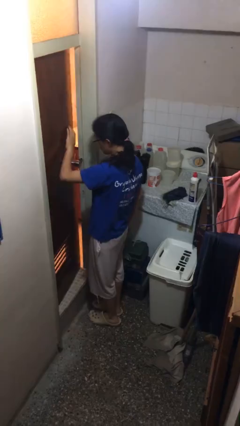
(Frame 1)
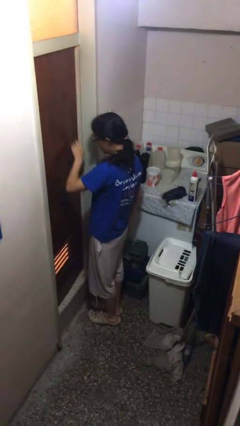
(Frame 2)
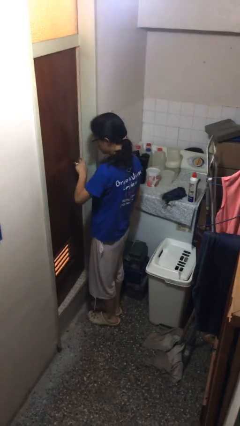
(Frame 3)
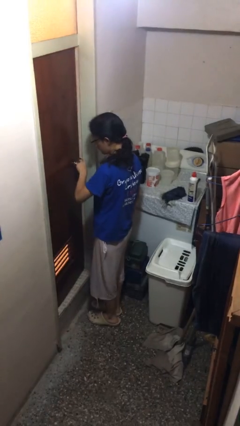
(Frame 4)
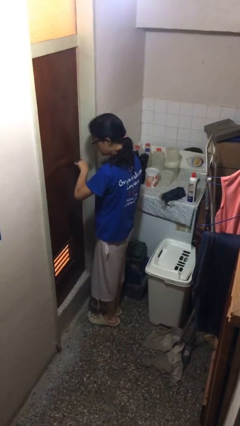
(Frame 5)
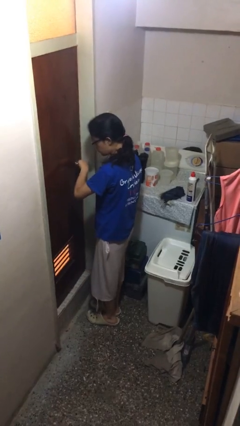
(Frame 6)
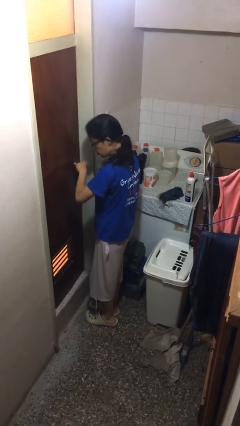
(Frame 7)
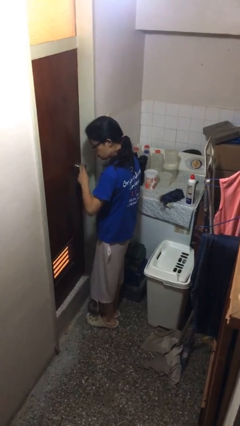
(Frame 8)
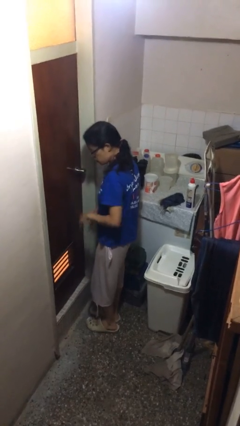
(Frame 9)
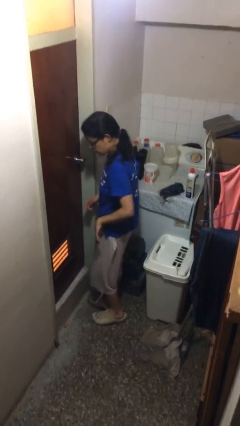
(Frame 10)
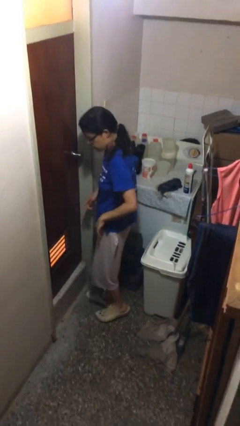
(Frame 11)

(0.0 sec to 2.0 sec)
person closes facility door

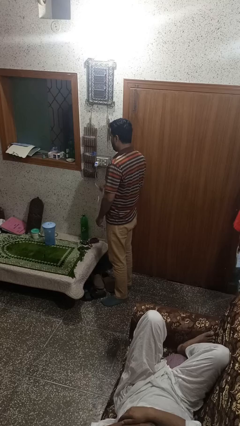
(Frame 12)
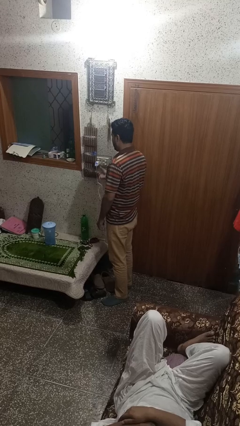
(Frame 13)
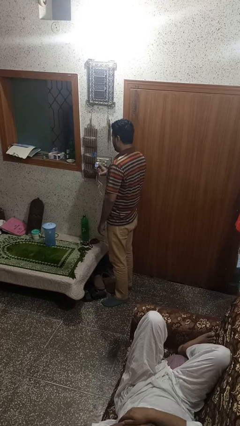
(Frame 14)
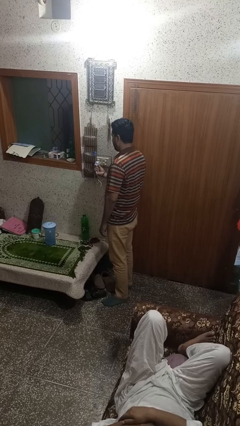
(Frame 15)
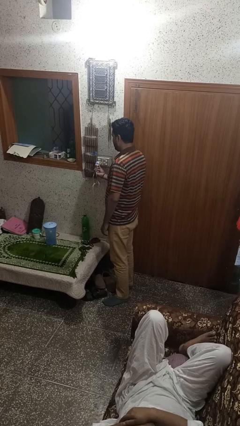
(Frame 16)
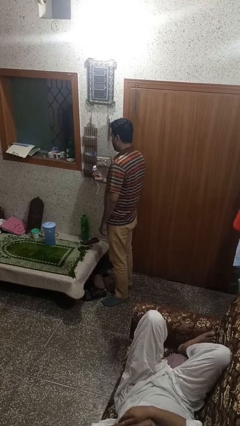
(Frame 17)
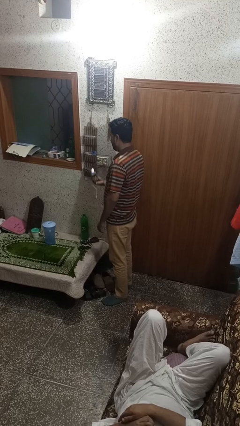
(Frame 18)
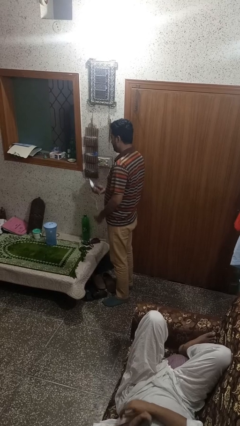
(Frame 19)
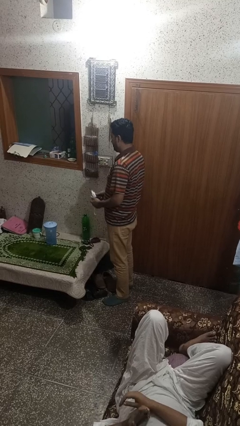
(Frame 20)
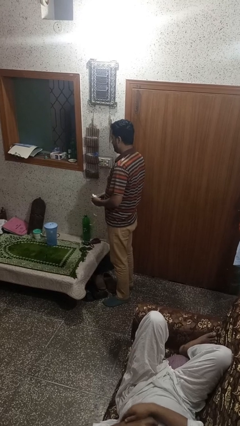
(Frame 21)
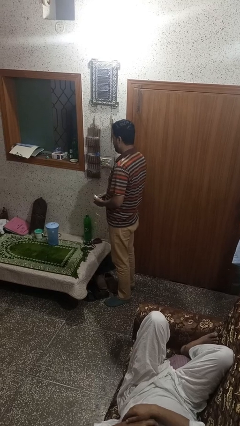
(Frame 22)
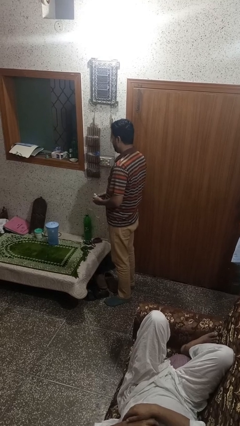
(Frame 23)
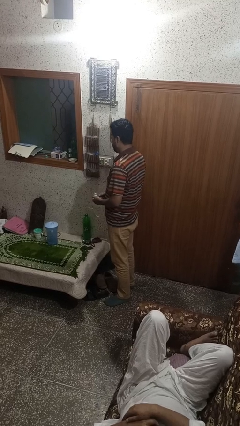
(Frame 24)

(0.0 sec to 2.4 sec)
person unplugs from electrical socket

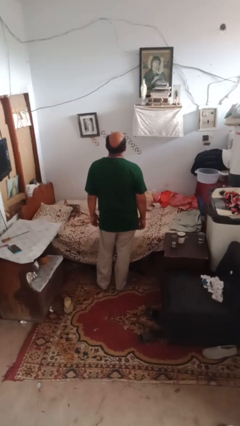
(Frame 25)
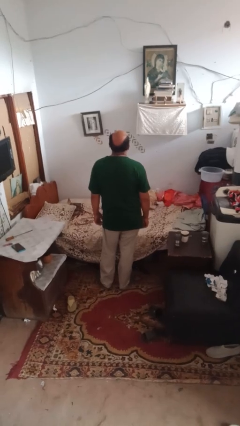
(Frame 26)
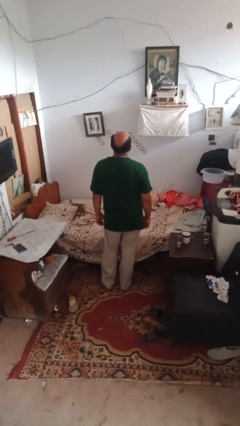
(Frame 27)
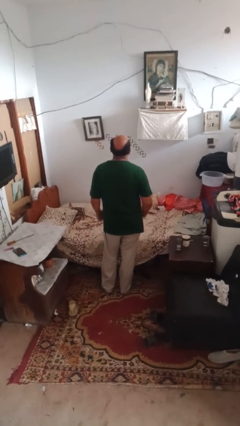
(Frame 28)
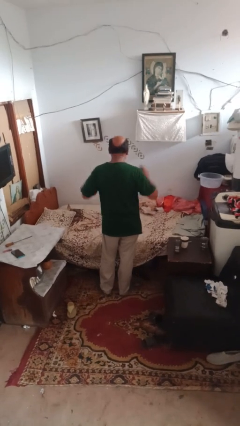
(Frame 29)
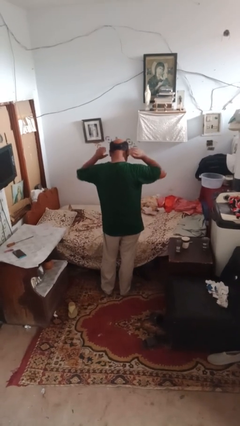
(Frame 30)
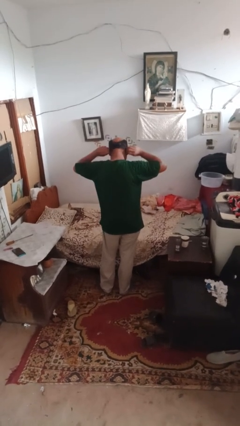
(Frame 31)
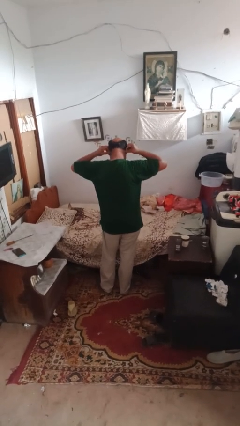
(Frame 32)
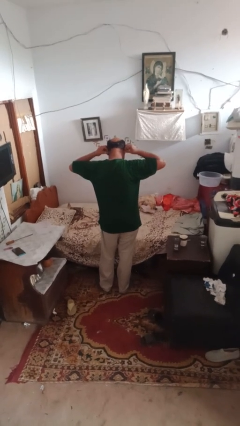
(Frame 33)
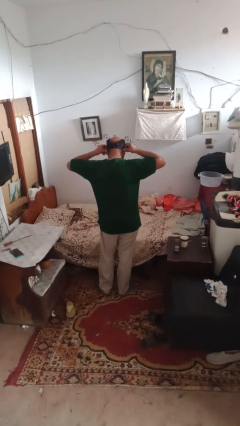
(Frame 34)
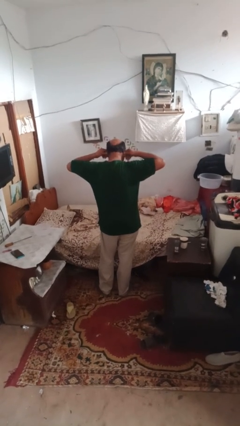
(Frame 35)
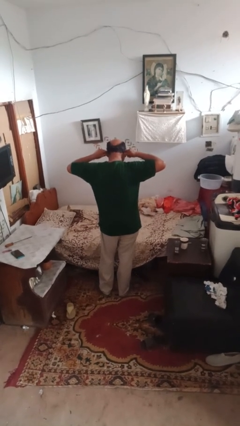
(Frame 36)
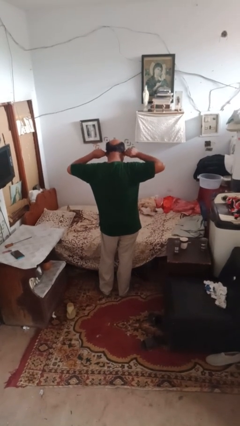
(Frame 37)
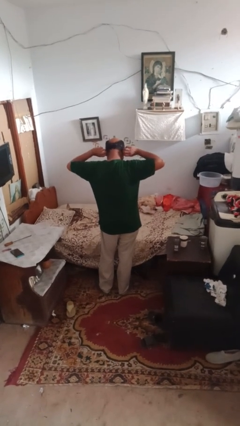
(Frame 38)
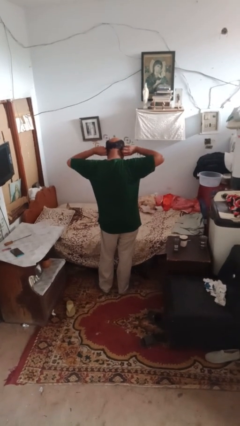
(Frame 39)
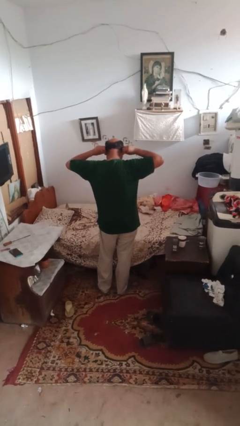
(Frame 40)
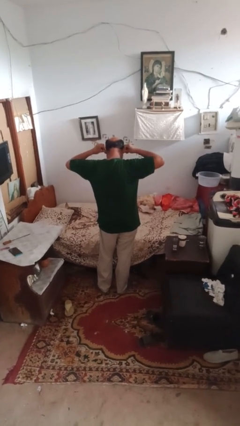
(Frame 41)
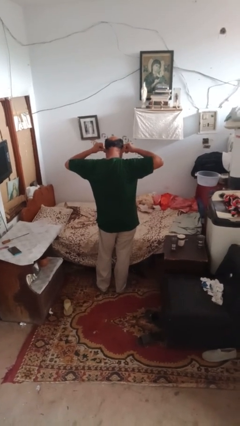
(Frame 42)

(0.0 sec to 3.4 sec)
person touches earlobe

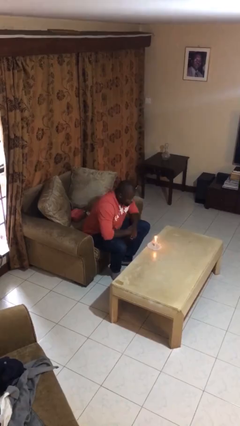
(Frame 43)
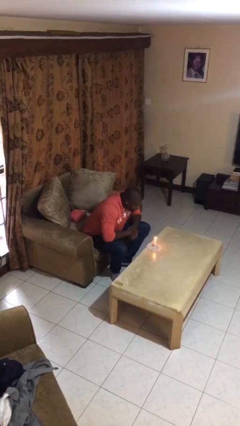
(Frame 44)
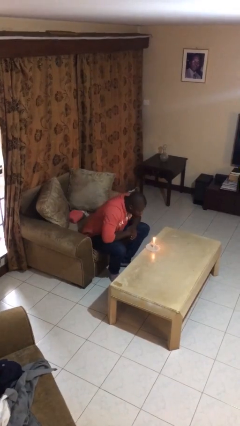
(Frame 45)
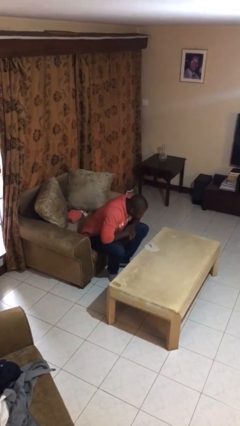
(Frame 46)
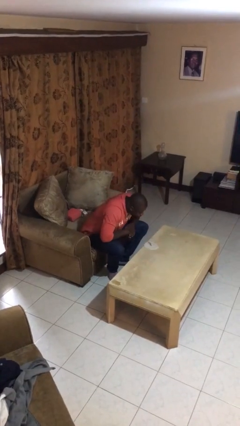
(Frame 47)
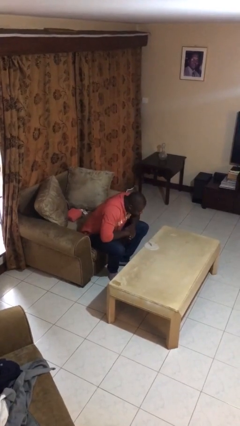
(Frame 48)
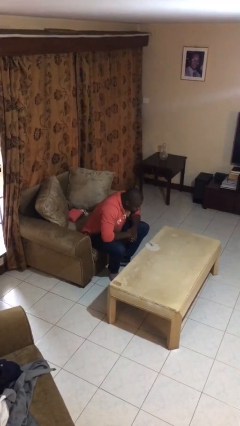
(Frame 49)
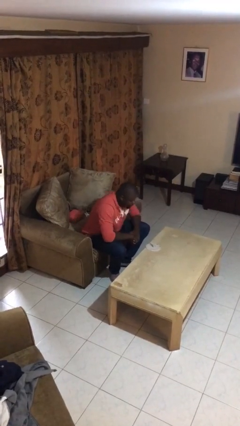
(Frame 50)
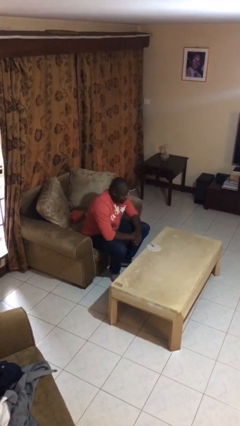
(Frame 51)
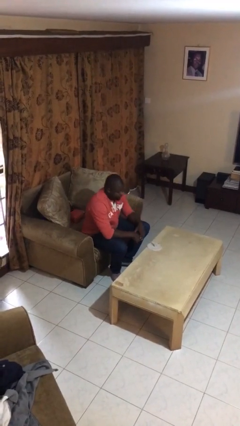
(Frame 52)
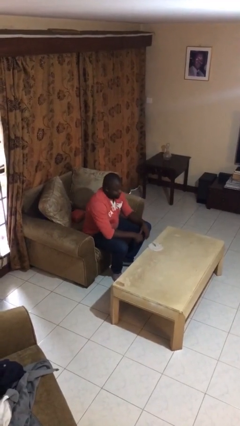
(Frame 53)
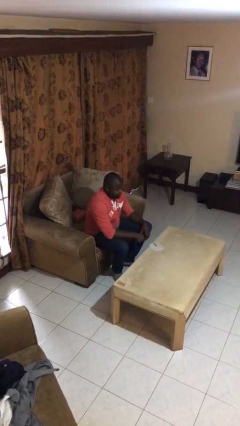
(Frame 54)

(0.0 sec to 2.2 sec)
person extinguishes candle

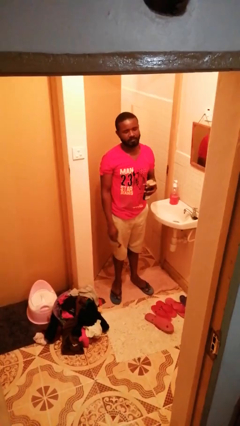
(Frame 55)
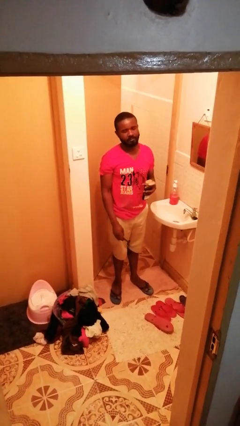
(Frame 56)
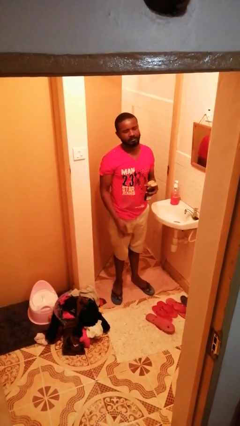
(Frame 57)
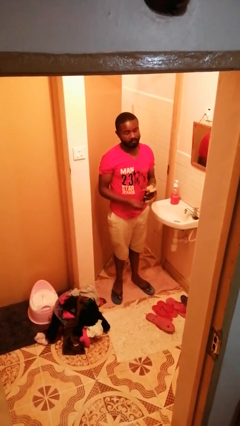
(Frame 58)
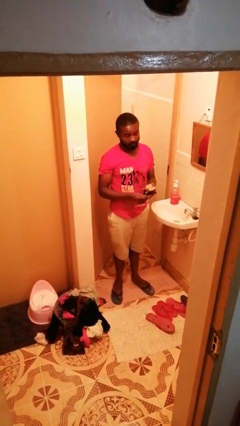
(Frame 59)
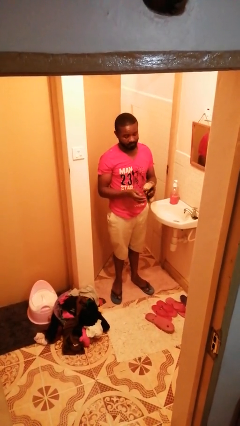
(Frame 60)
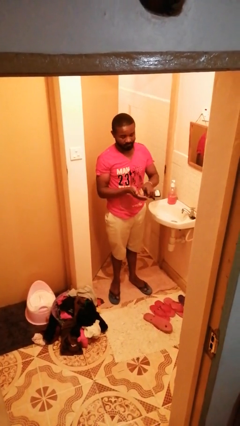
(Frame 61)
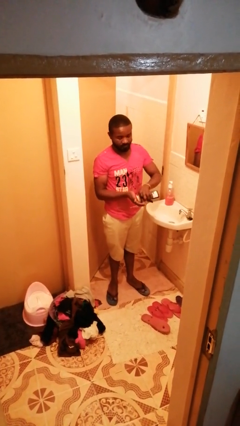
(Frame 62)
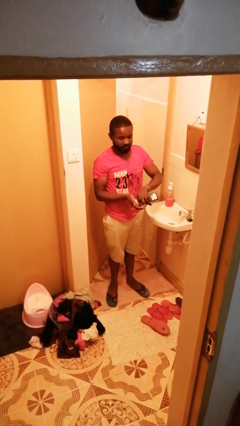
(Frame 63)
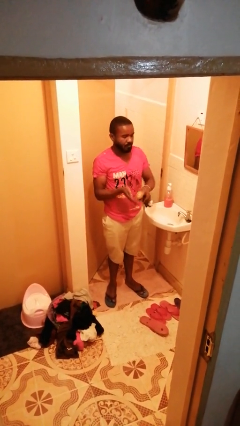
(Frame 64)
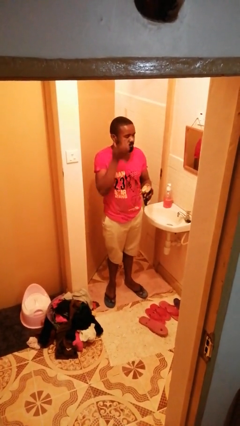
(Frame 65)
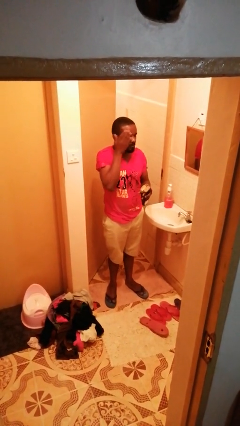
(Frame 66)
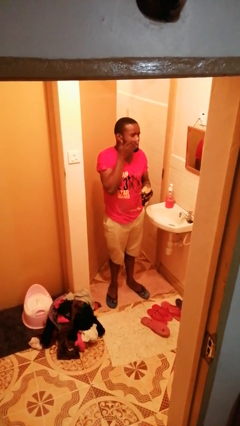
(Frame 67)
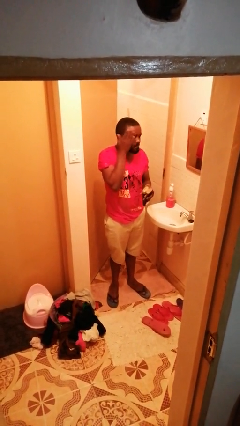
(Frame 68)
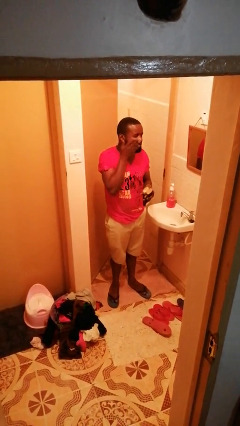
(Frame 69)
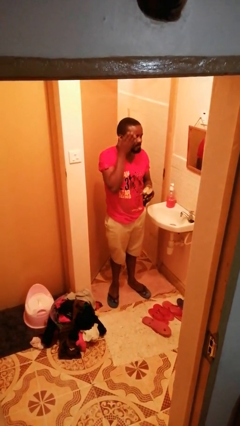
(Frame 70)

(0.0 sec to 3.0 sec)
person applies shaving cream

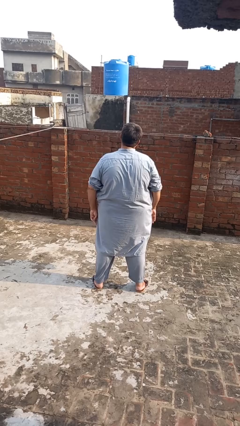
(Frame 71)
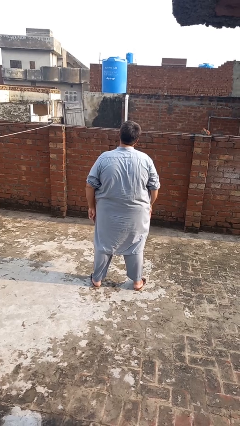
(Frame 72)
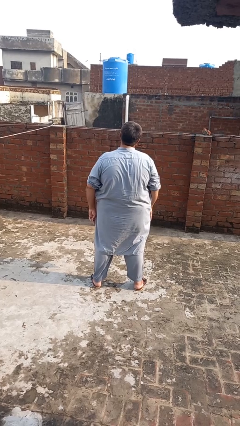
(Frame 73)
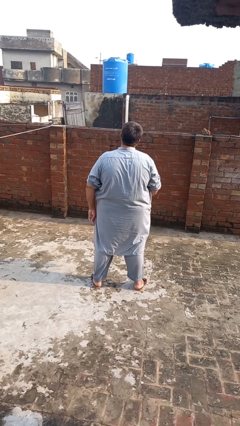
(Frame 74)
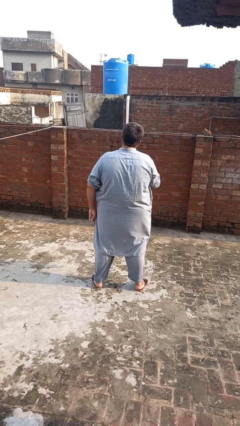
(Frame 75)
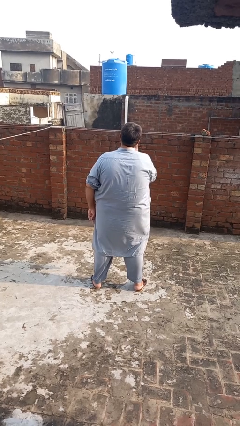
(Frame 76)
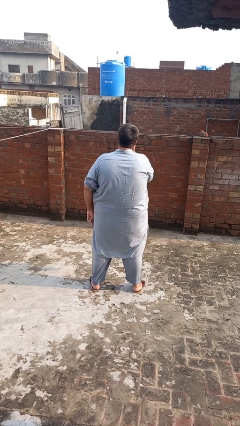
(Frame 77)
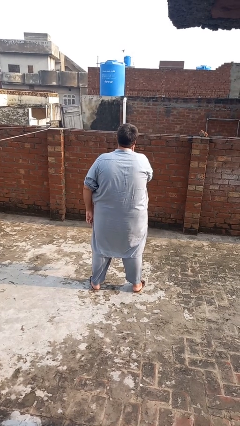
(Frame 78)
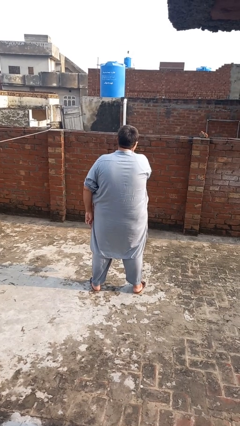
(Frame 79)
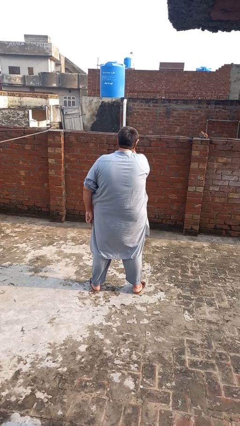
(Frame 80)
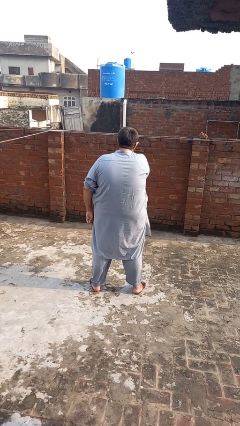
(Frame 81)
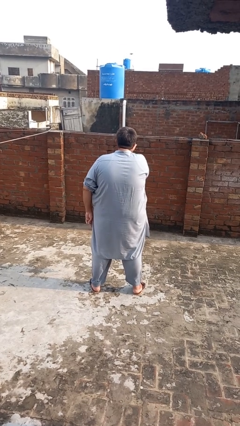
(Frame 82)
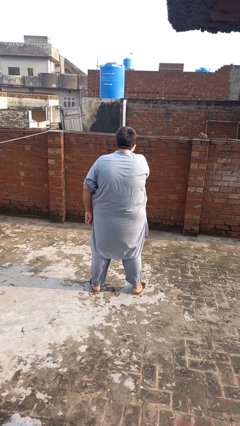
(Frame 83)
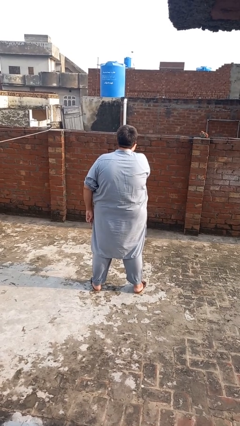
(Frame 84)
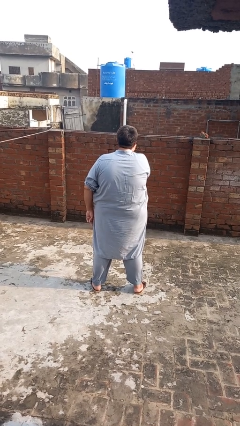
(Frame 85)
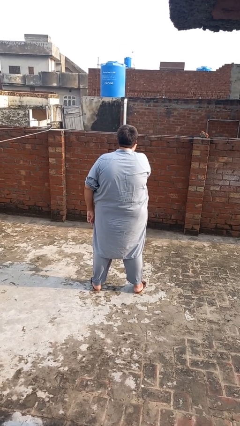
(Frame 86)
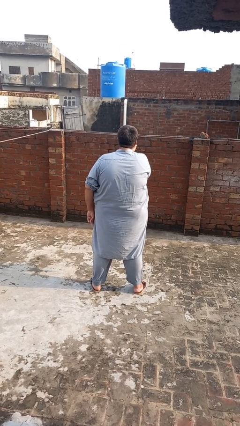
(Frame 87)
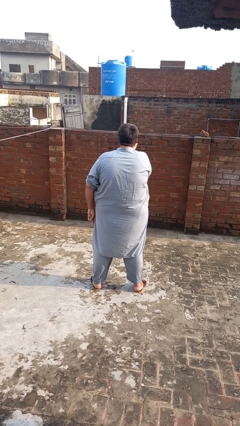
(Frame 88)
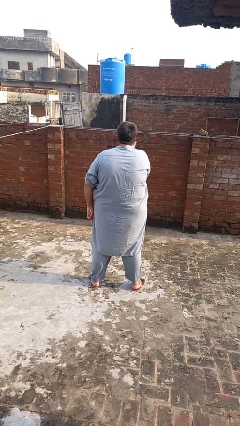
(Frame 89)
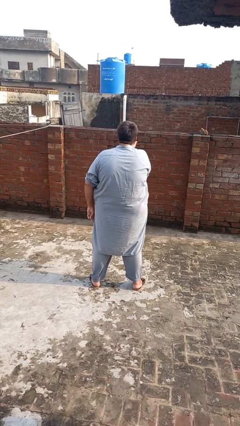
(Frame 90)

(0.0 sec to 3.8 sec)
person gestures blow kiss

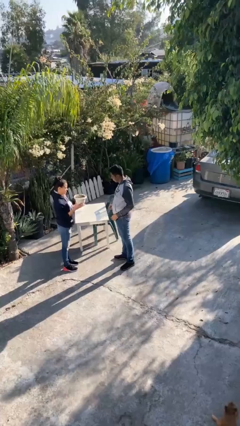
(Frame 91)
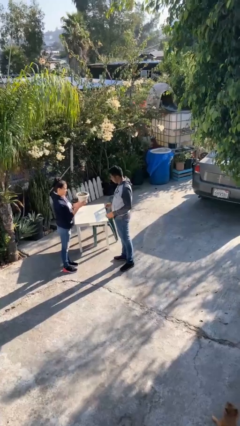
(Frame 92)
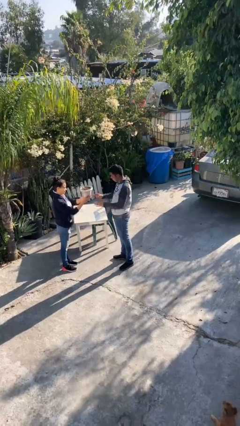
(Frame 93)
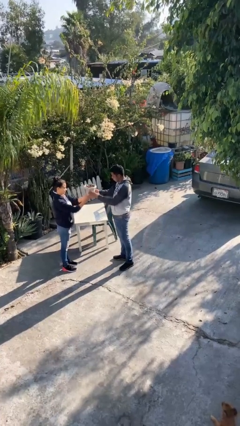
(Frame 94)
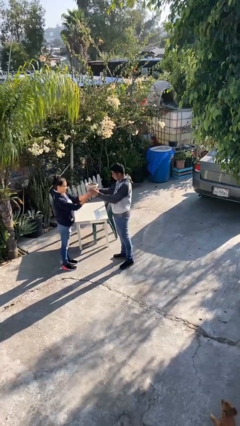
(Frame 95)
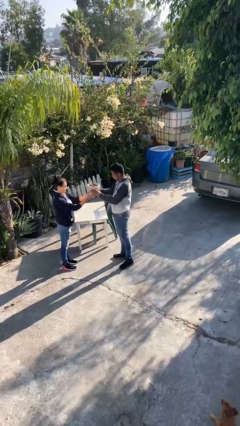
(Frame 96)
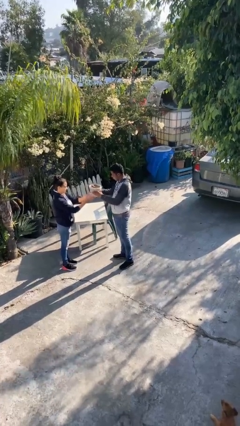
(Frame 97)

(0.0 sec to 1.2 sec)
person transfers object to person
